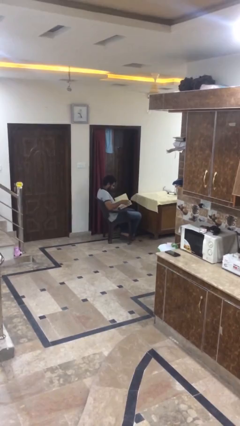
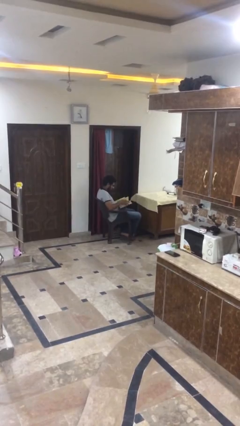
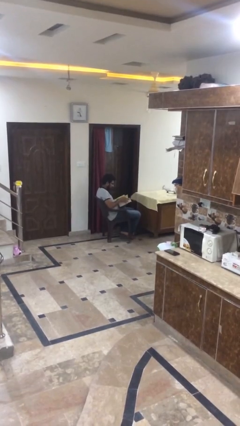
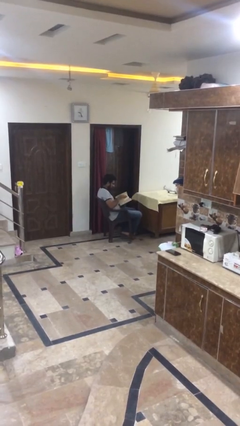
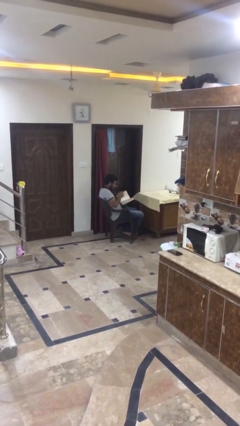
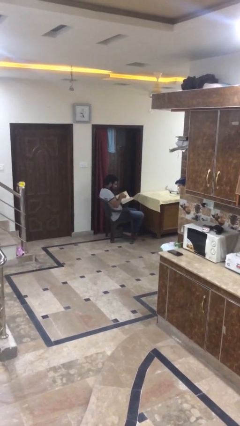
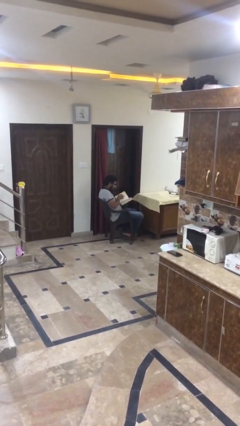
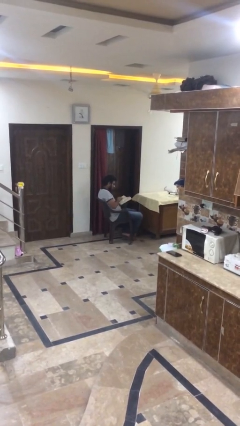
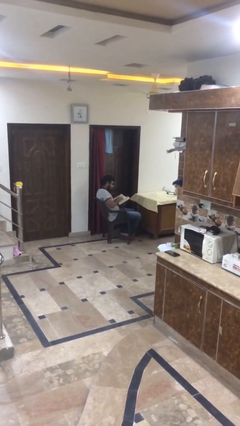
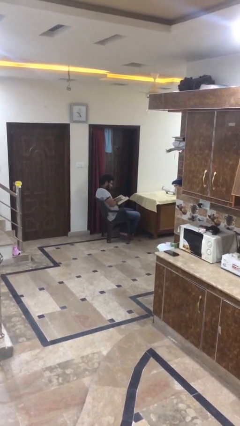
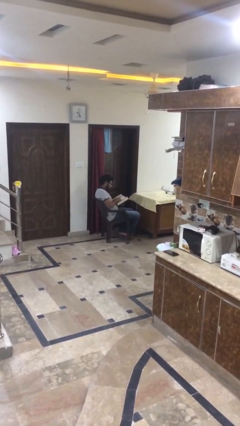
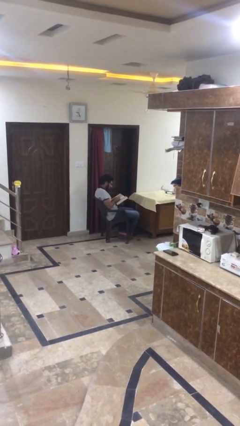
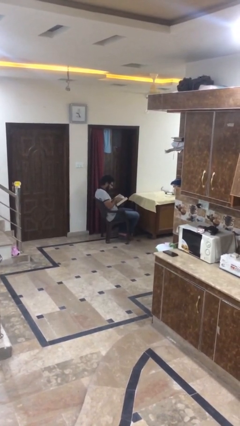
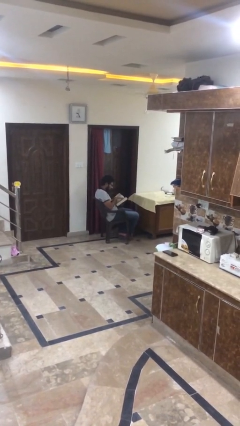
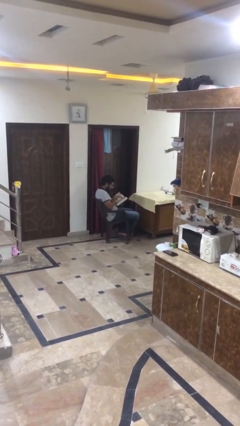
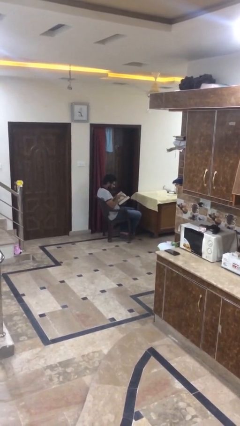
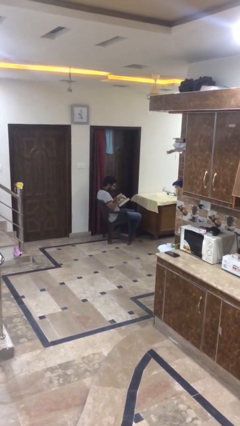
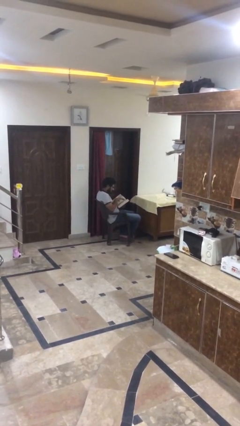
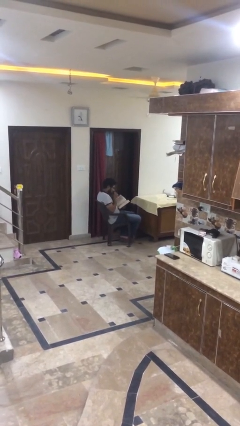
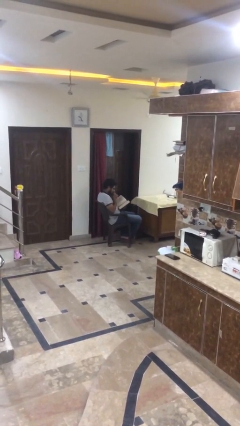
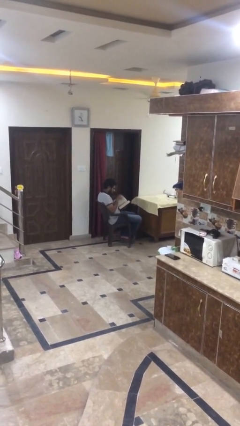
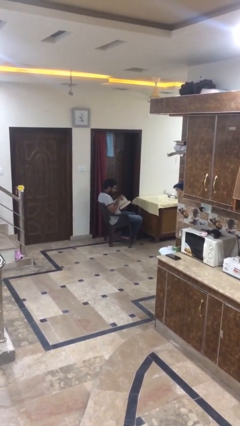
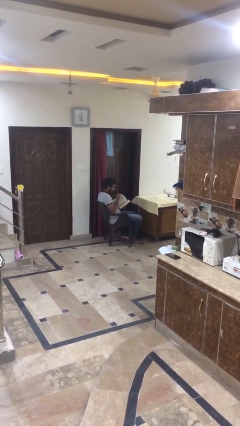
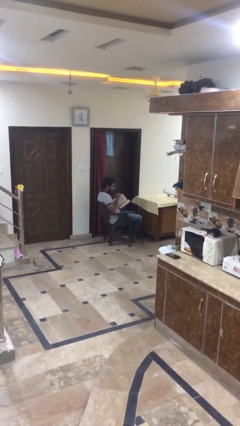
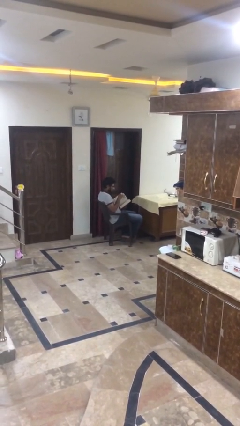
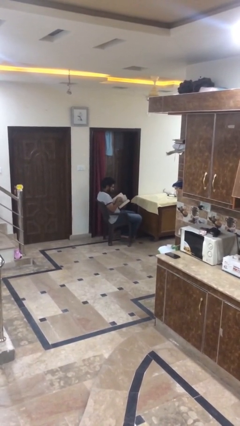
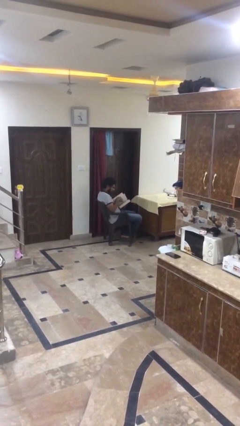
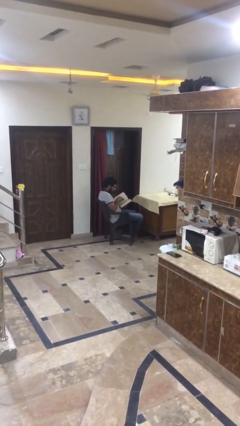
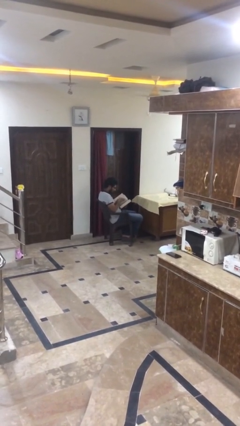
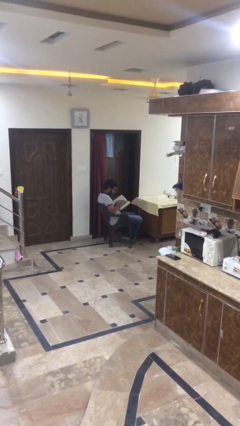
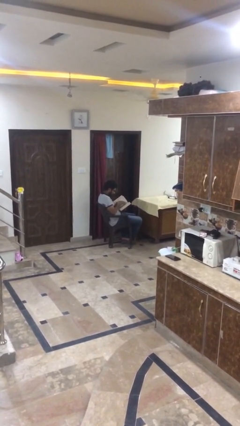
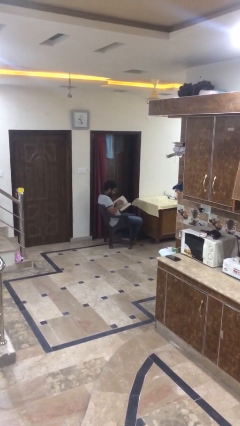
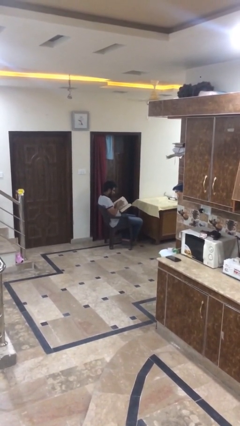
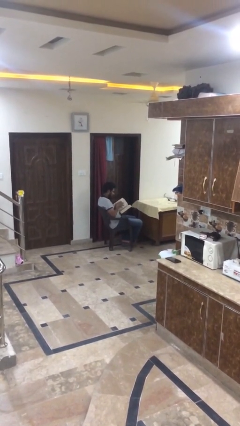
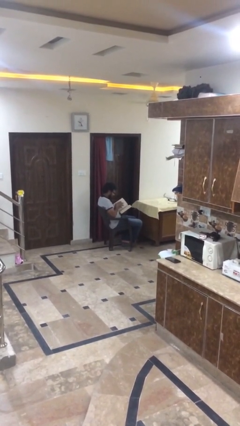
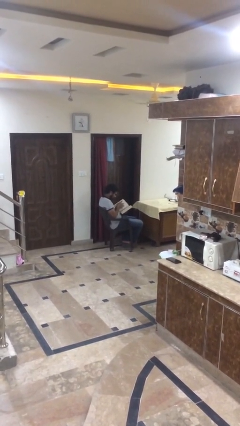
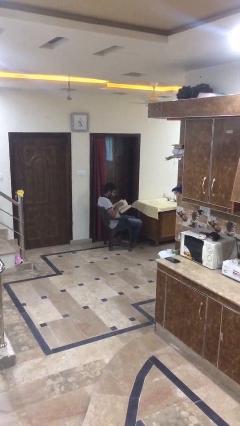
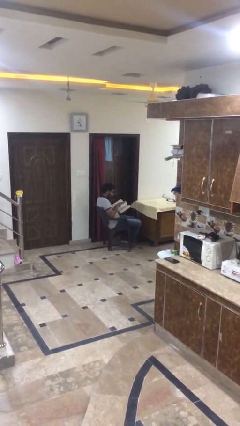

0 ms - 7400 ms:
person reads document

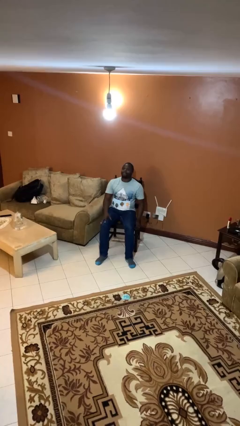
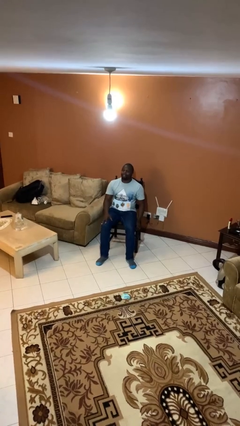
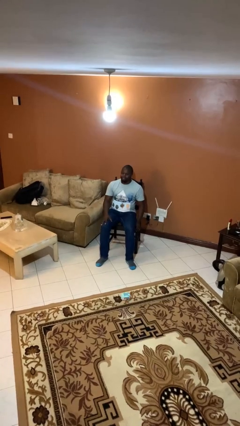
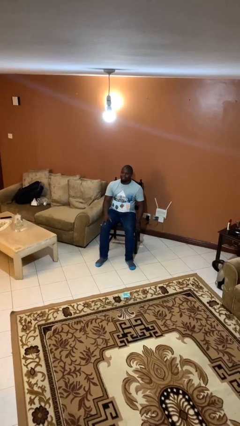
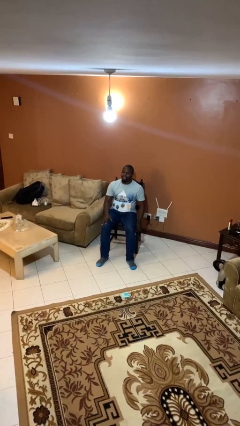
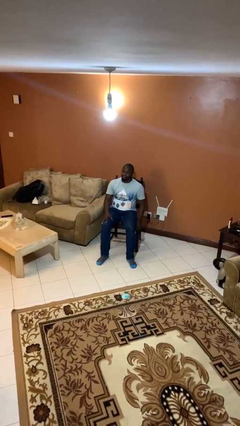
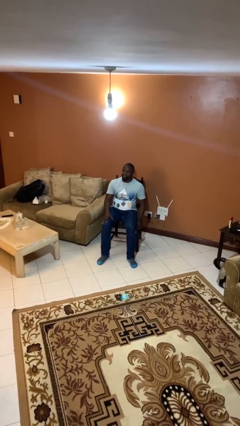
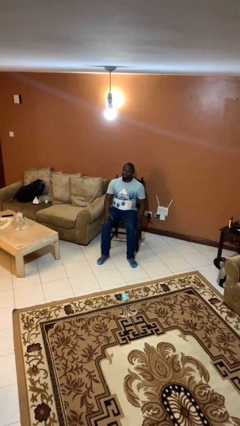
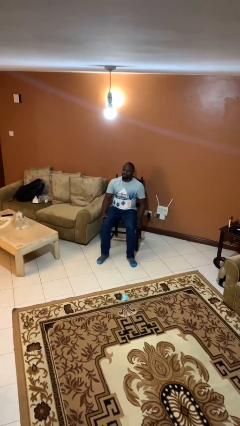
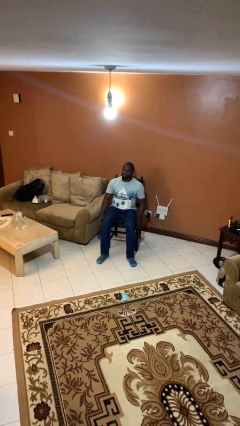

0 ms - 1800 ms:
person slaps hands on thighs

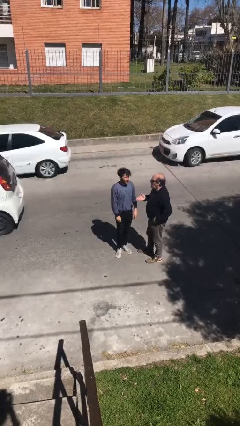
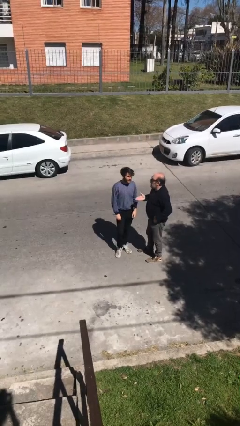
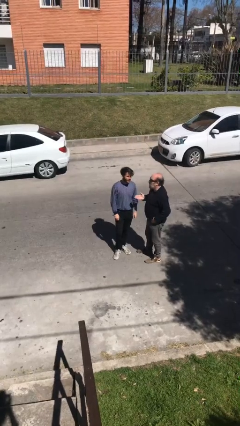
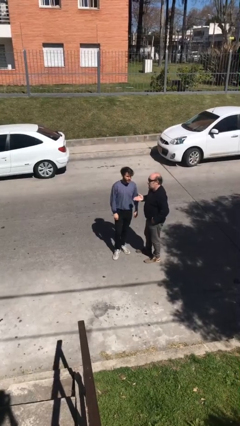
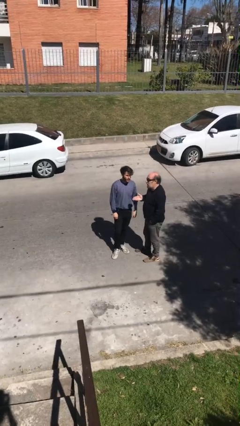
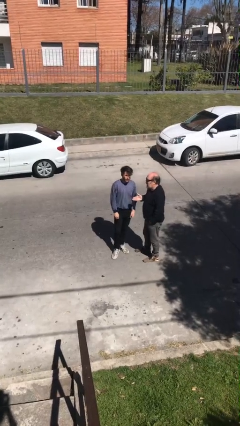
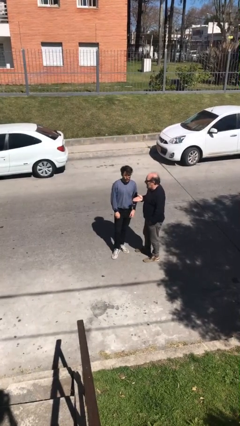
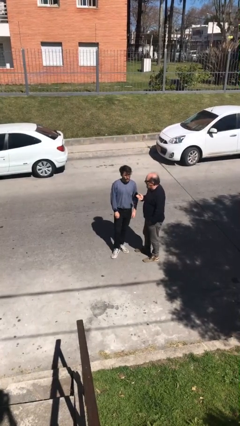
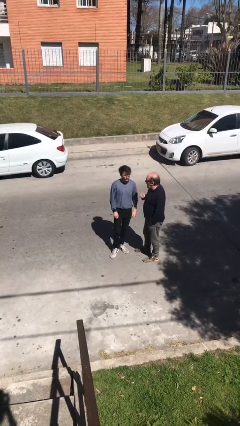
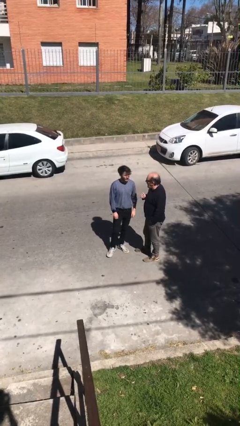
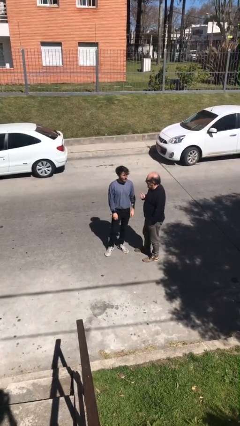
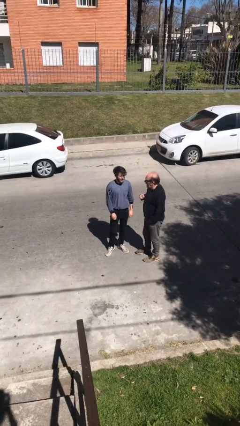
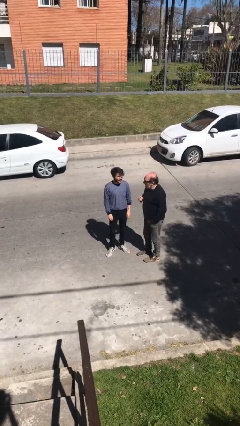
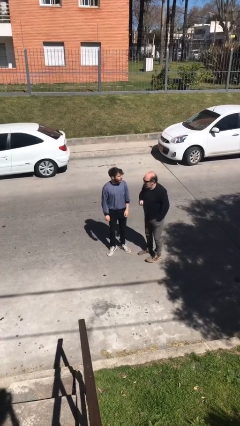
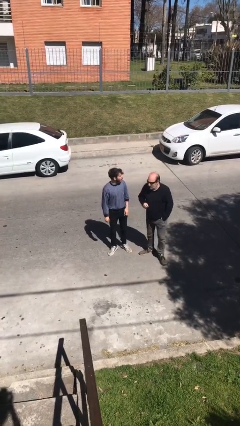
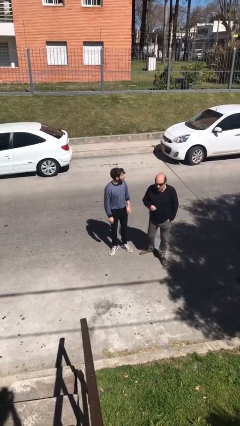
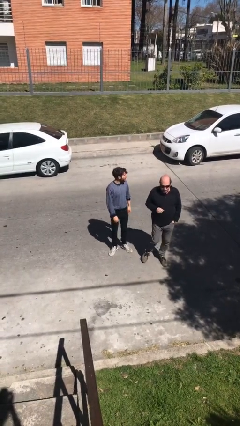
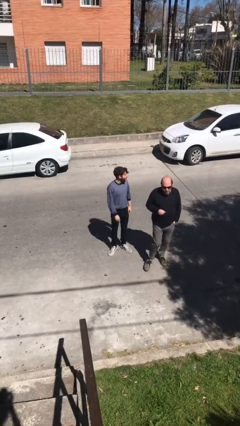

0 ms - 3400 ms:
person talks to person

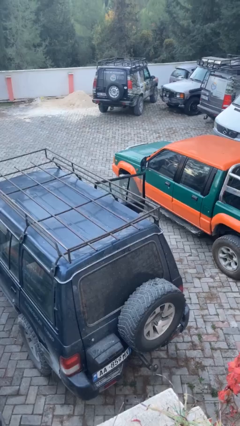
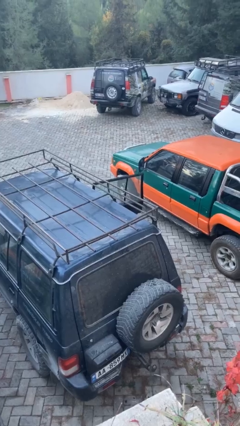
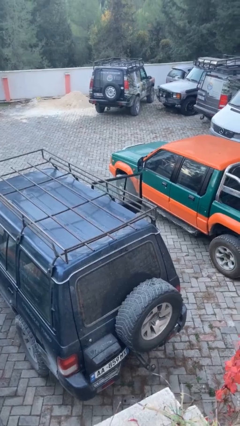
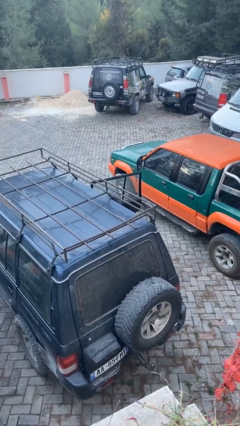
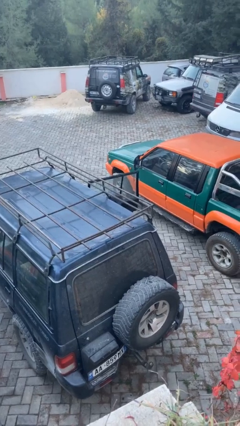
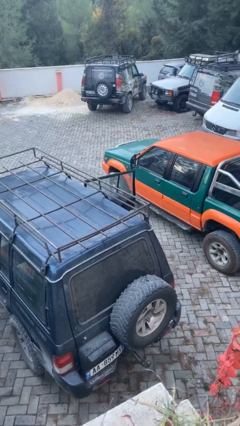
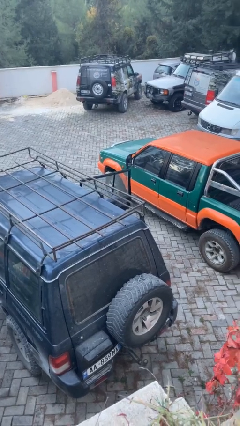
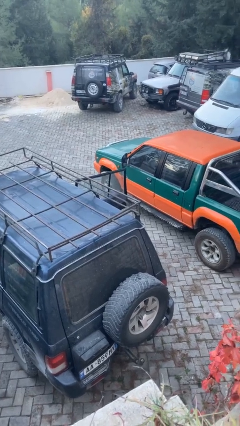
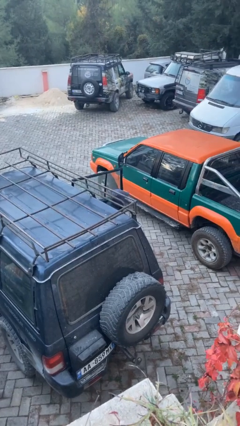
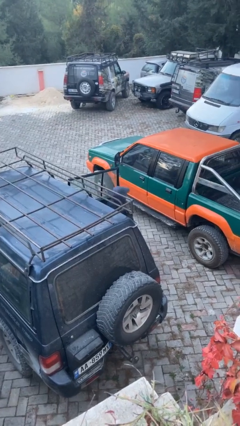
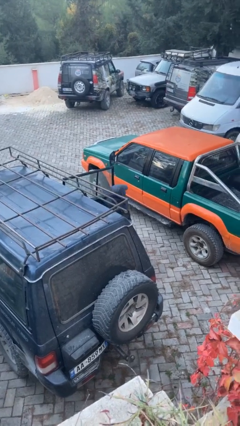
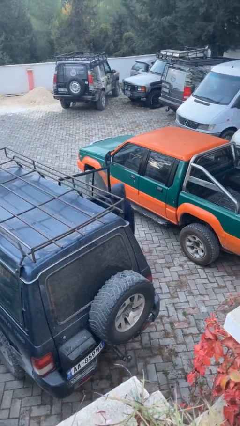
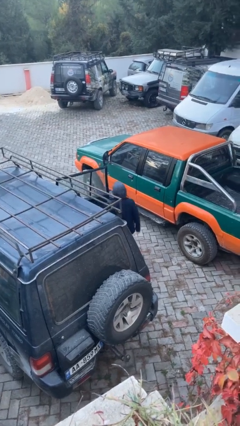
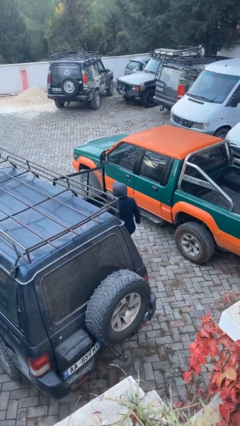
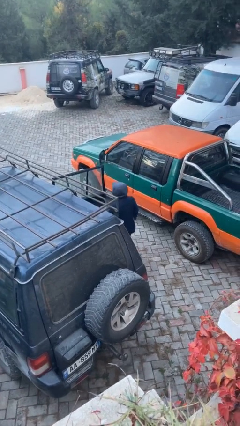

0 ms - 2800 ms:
person exits car

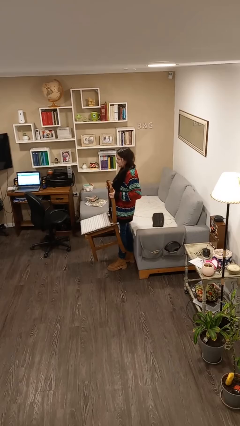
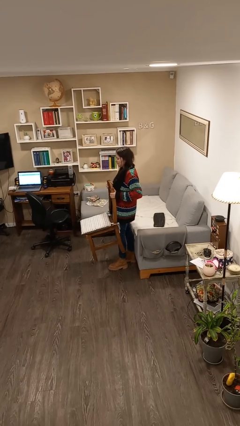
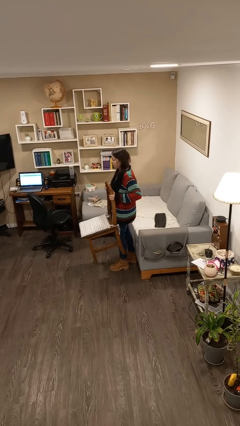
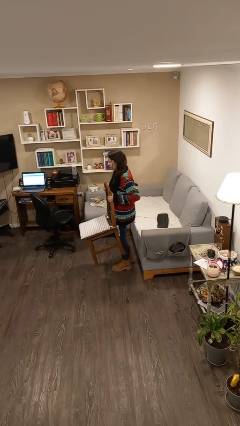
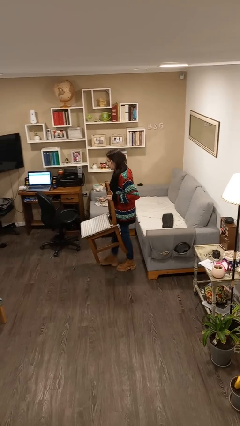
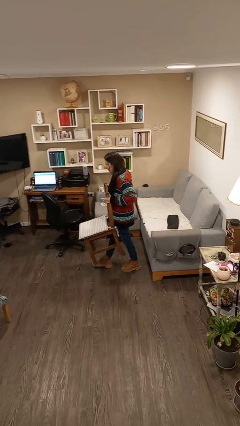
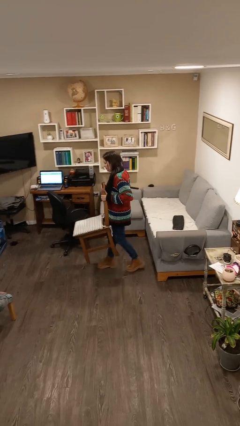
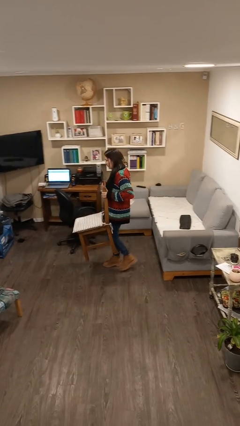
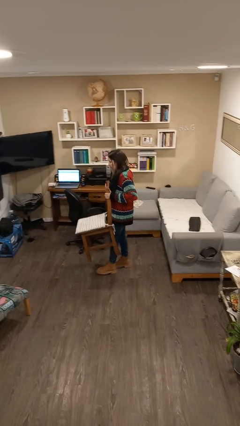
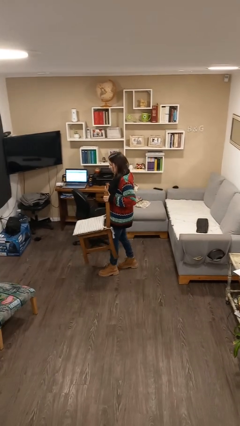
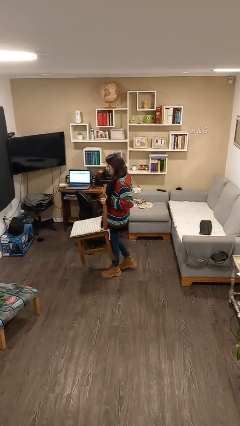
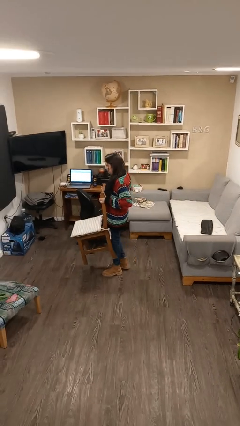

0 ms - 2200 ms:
person carries furniture

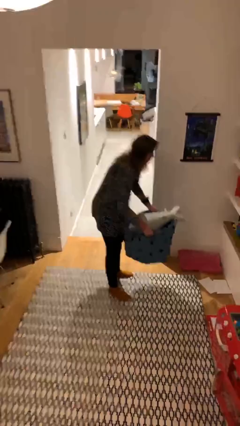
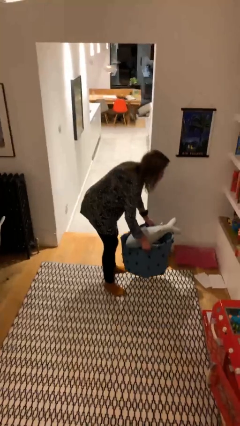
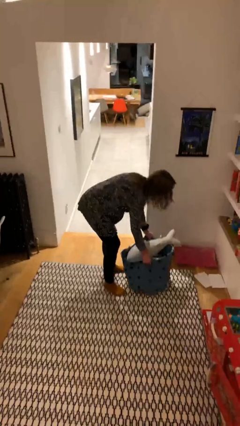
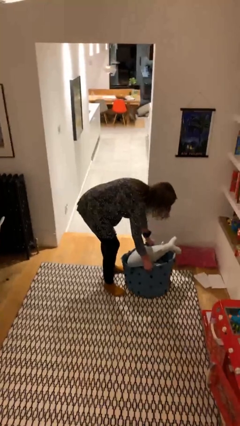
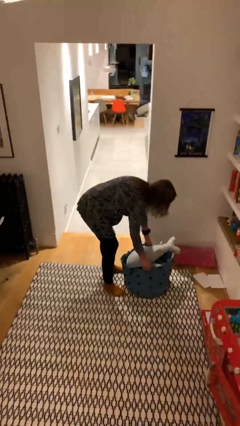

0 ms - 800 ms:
person puts down object on floor
